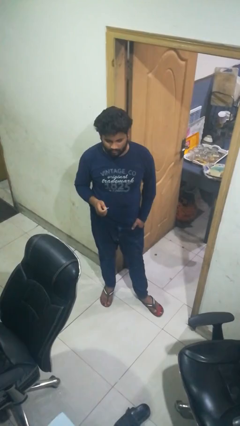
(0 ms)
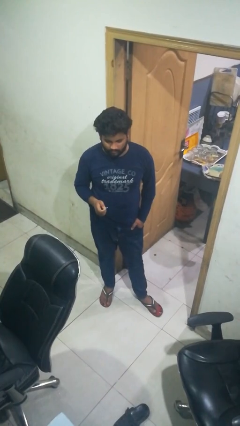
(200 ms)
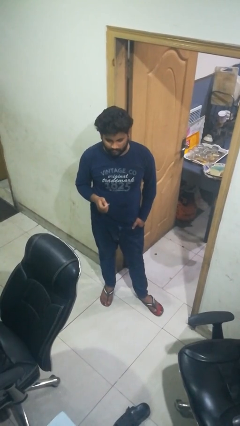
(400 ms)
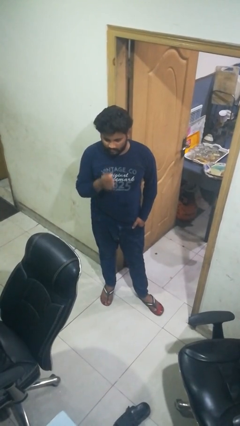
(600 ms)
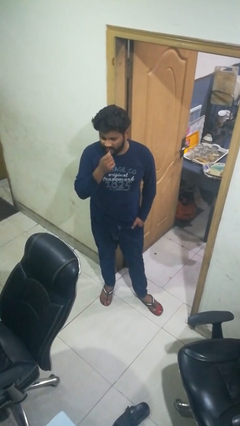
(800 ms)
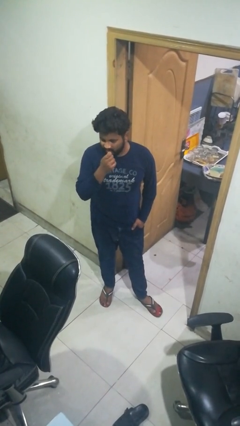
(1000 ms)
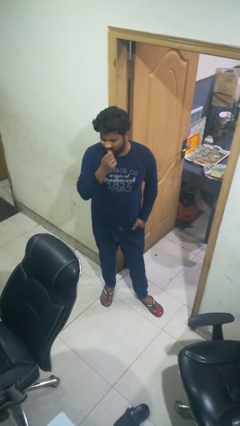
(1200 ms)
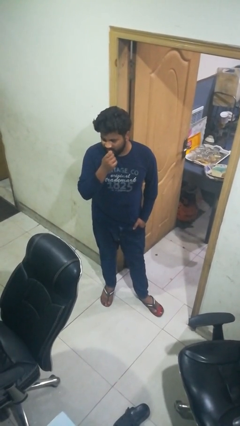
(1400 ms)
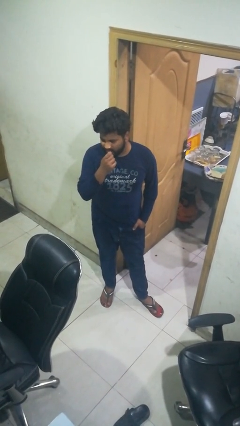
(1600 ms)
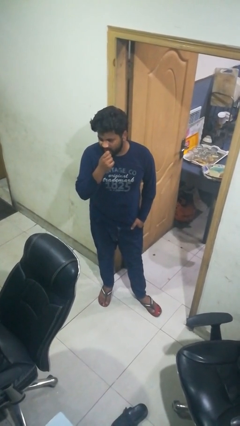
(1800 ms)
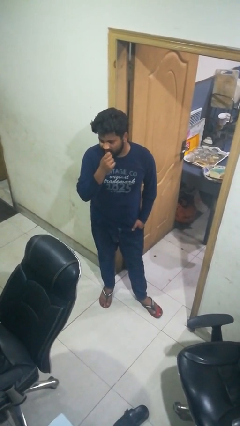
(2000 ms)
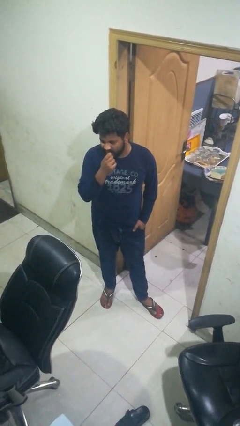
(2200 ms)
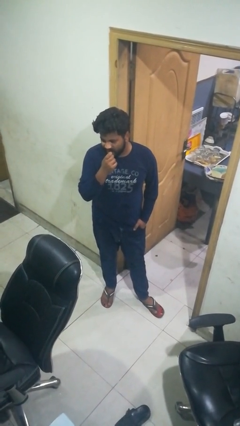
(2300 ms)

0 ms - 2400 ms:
person flosses

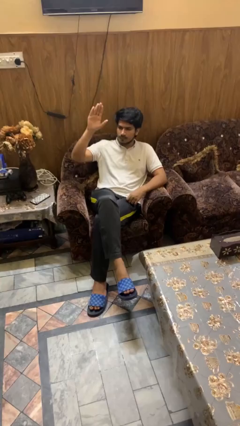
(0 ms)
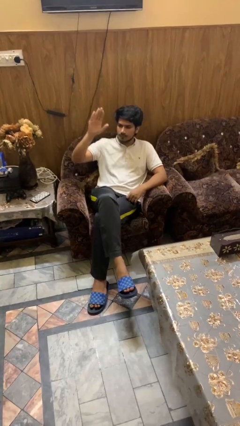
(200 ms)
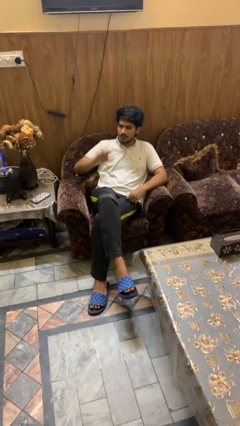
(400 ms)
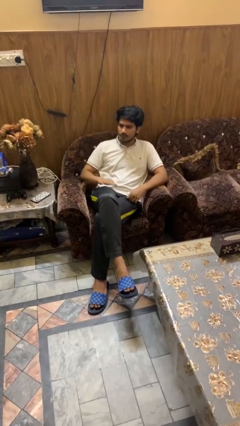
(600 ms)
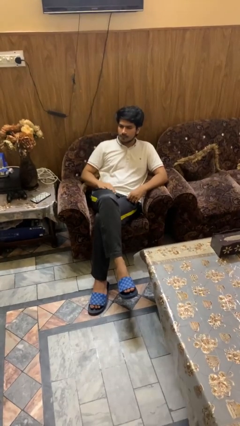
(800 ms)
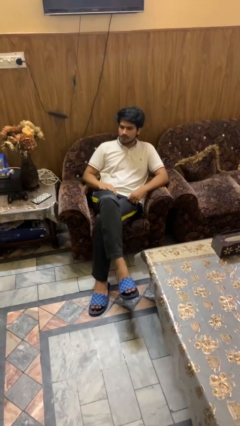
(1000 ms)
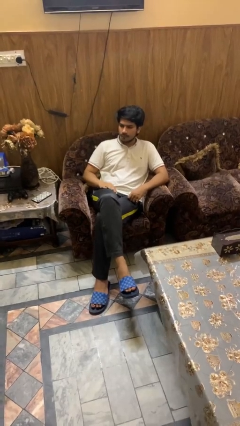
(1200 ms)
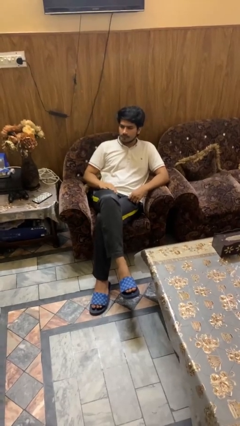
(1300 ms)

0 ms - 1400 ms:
person gestures lower hand

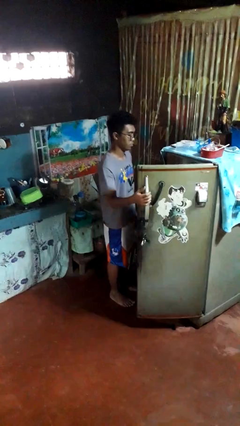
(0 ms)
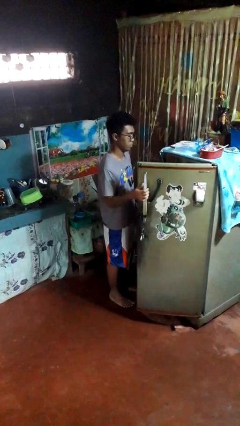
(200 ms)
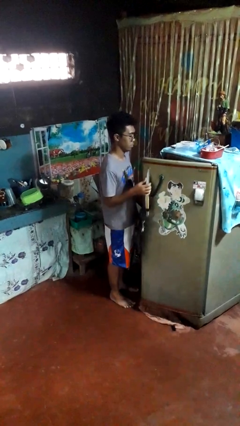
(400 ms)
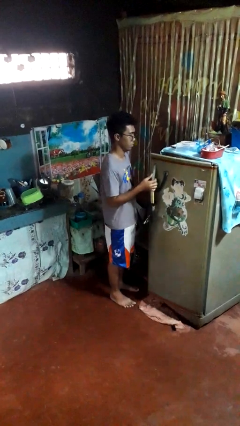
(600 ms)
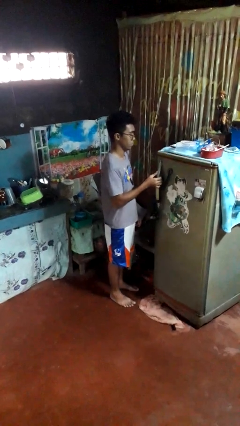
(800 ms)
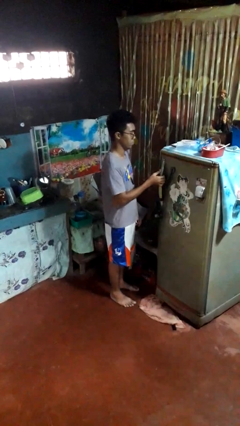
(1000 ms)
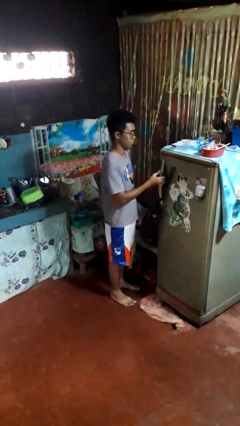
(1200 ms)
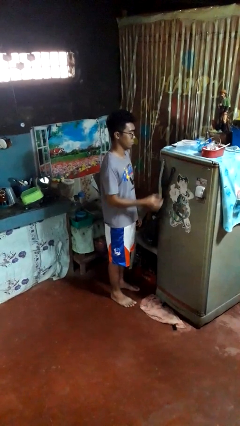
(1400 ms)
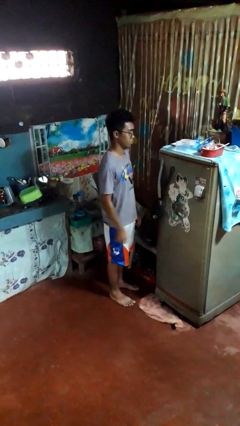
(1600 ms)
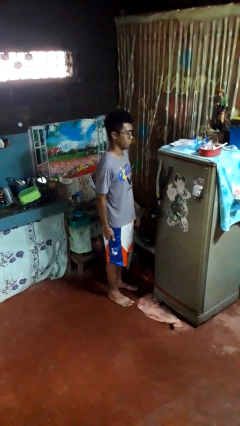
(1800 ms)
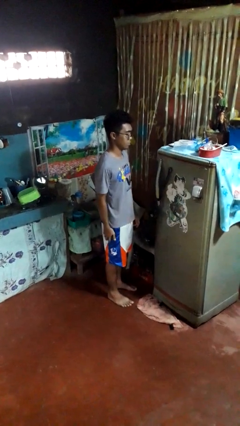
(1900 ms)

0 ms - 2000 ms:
person closes refrigerator

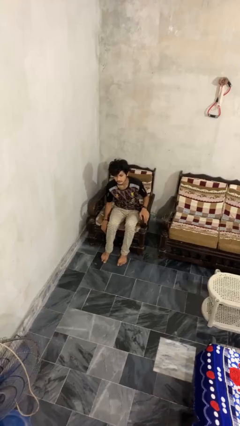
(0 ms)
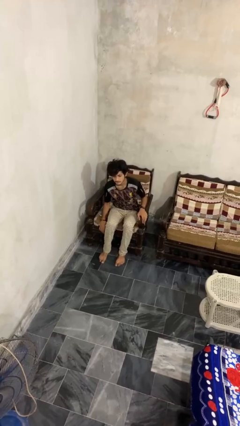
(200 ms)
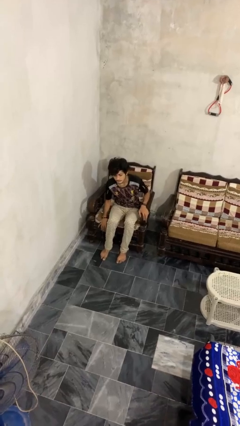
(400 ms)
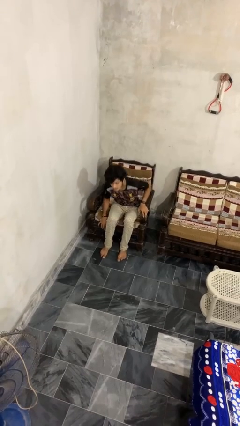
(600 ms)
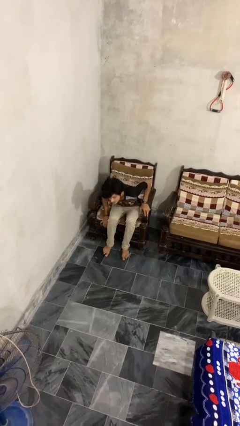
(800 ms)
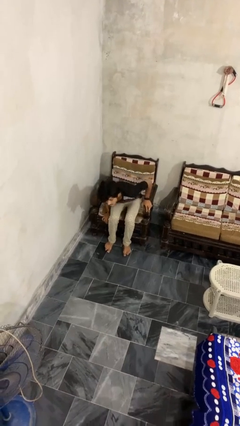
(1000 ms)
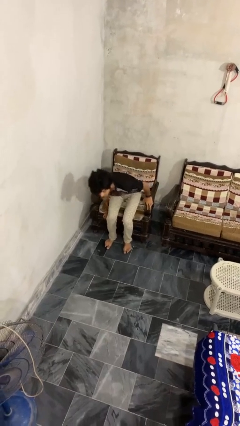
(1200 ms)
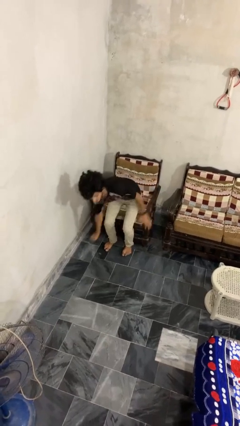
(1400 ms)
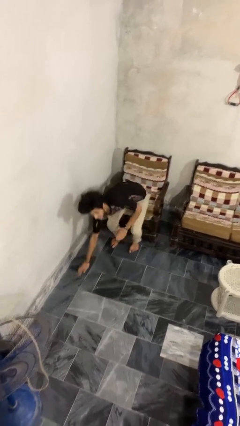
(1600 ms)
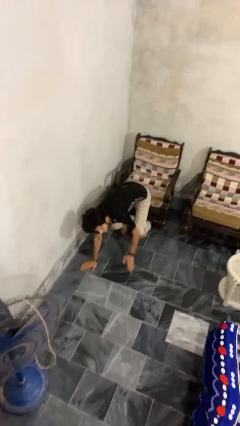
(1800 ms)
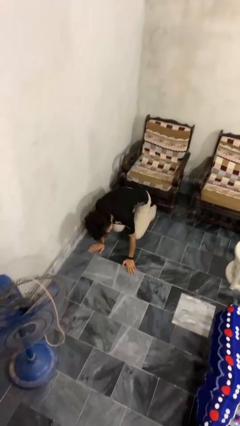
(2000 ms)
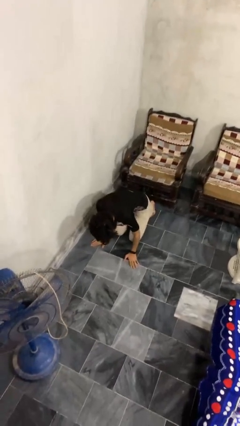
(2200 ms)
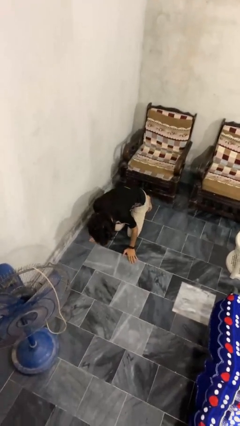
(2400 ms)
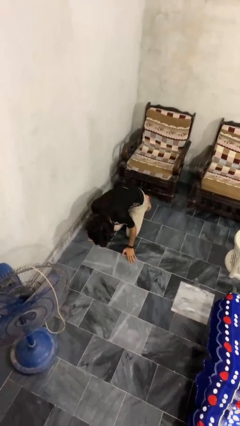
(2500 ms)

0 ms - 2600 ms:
person falls from chair

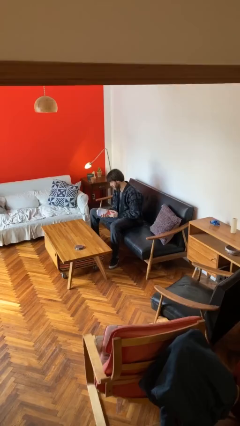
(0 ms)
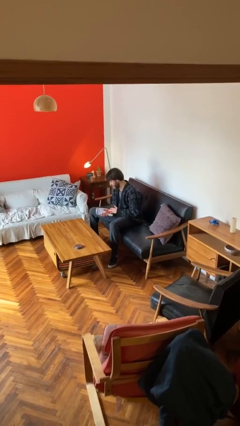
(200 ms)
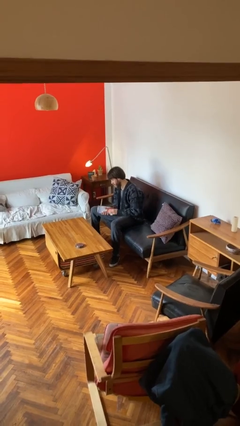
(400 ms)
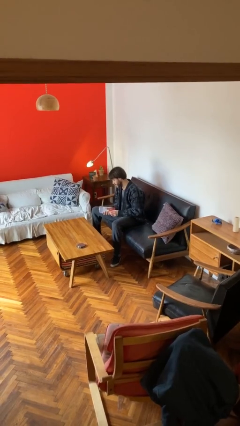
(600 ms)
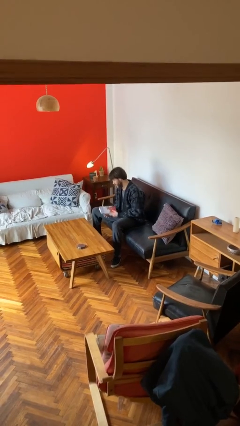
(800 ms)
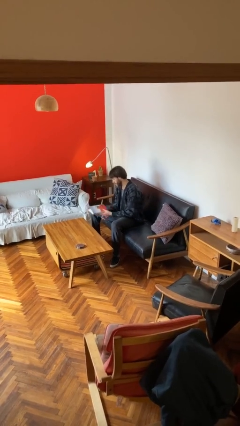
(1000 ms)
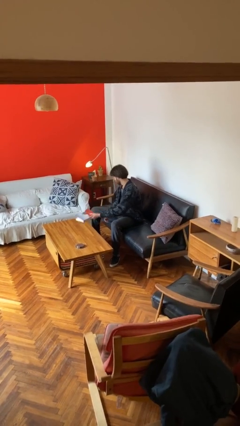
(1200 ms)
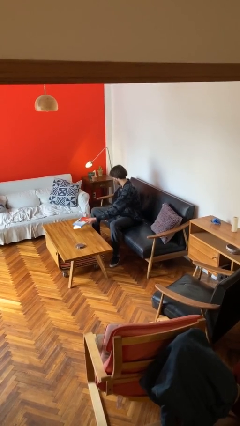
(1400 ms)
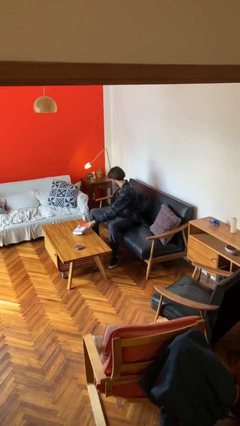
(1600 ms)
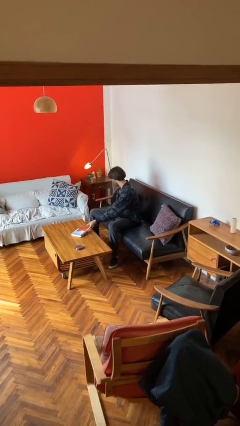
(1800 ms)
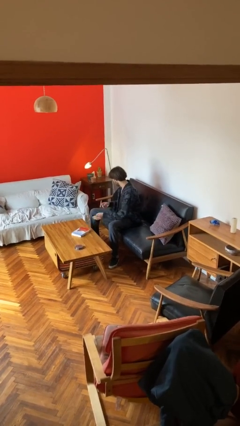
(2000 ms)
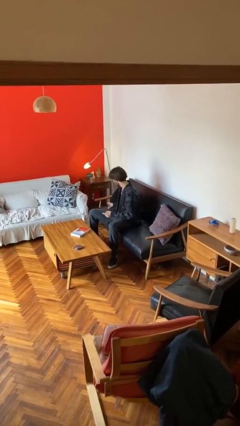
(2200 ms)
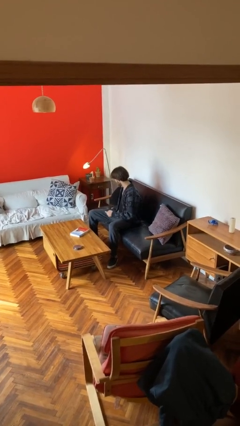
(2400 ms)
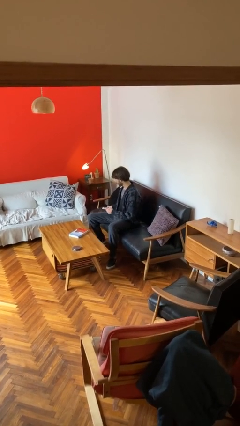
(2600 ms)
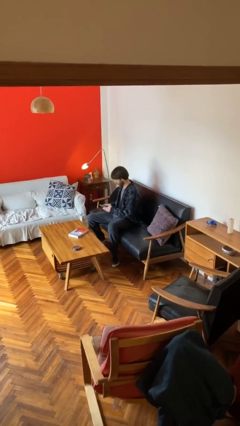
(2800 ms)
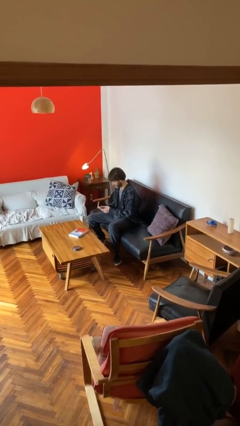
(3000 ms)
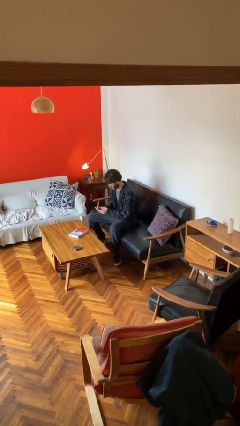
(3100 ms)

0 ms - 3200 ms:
person puts down object on table

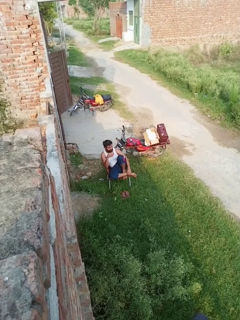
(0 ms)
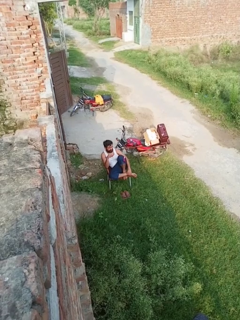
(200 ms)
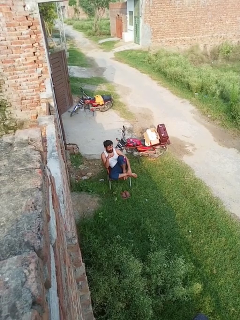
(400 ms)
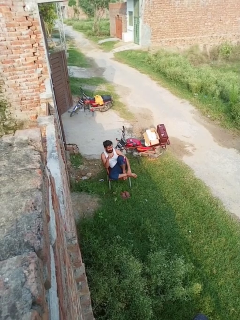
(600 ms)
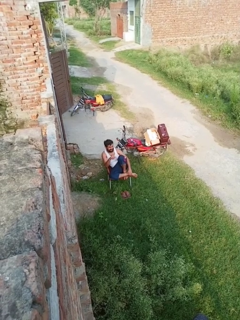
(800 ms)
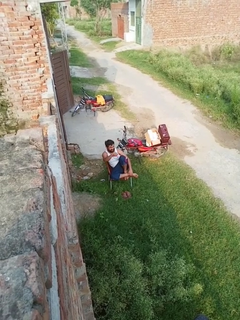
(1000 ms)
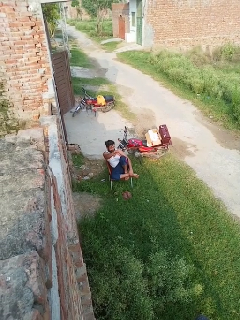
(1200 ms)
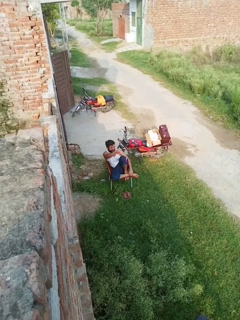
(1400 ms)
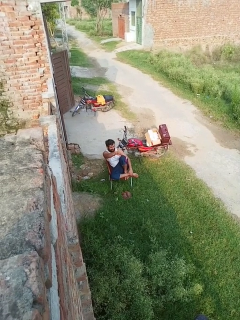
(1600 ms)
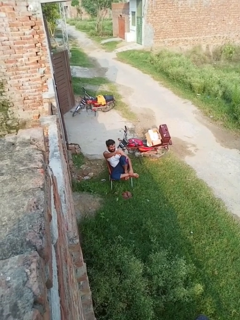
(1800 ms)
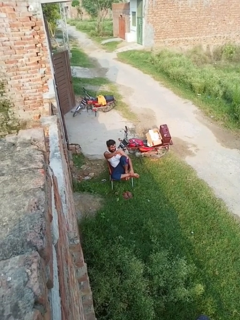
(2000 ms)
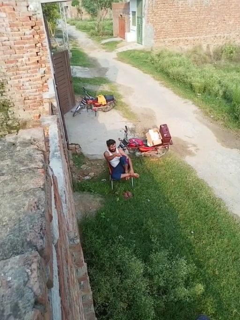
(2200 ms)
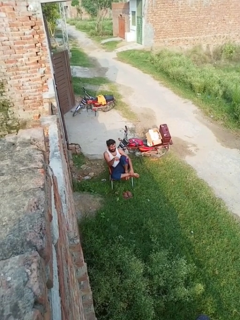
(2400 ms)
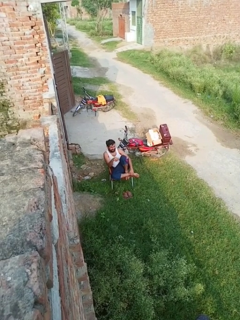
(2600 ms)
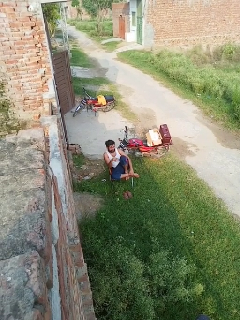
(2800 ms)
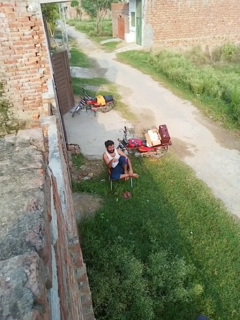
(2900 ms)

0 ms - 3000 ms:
person gestures thumbs down

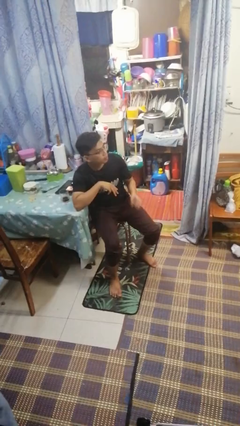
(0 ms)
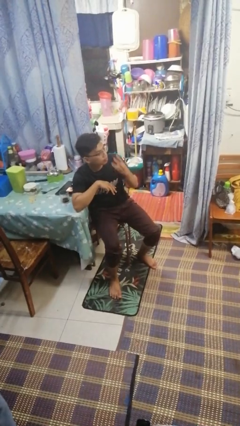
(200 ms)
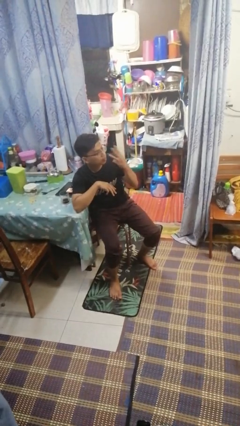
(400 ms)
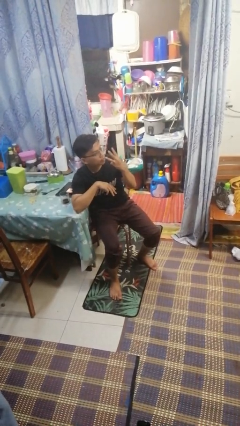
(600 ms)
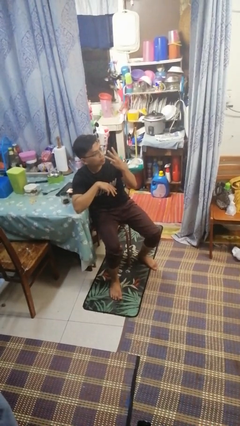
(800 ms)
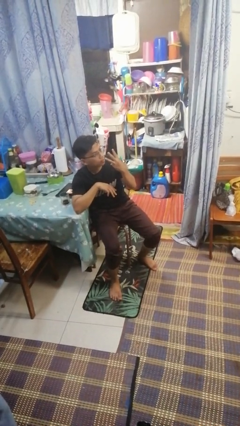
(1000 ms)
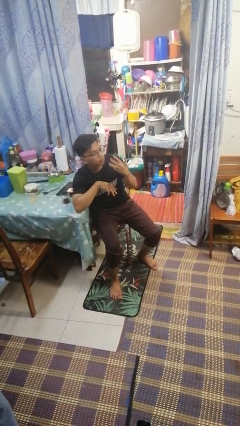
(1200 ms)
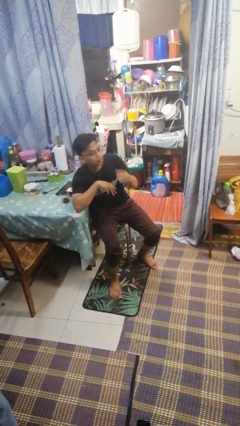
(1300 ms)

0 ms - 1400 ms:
person gestures number three

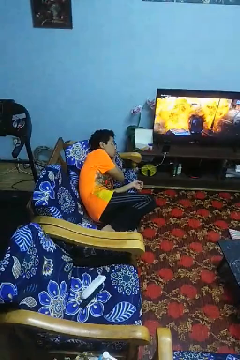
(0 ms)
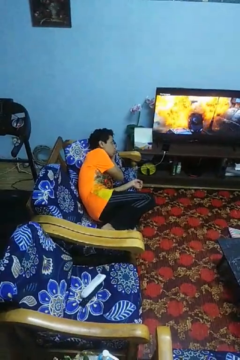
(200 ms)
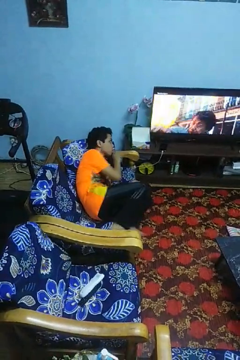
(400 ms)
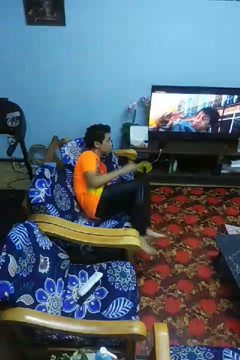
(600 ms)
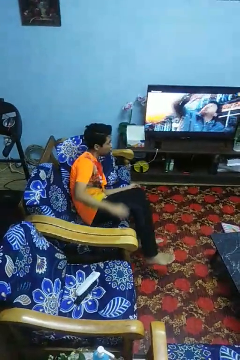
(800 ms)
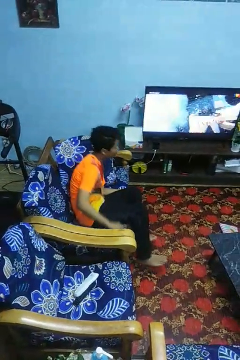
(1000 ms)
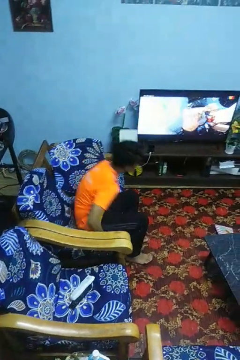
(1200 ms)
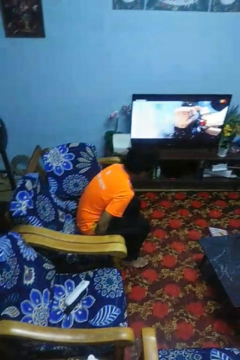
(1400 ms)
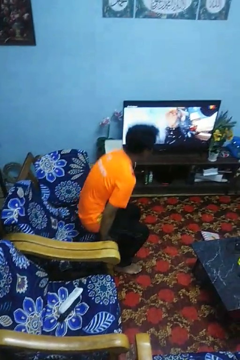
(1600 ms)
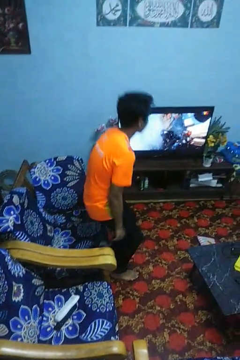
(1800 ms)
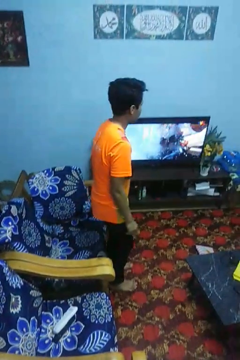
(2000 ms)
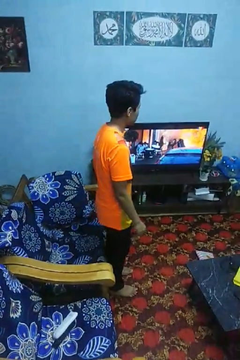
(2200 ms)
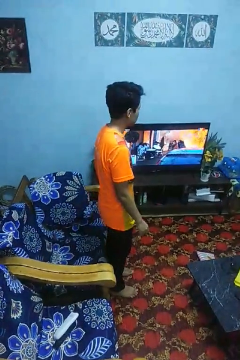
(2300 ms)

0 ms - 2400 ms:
person stands up
